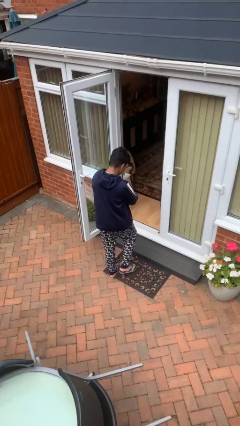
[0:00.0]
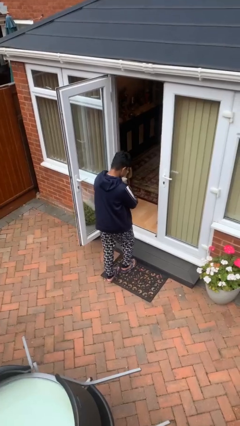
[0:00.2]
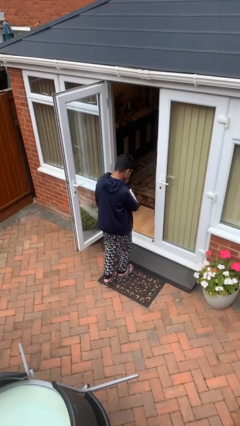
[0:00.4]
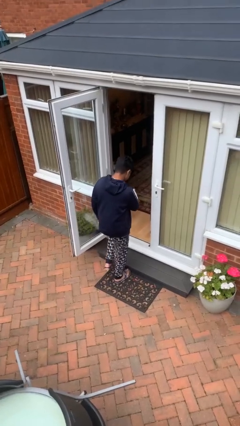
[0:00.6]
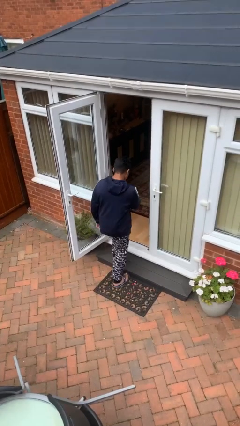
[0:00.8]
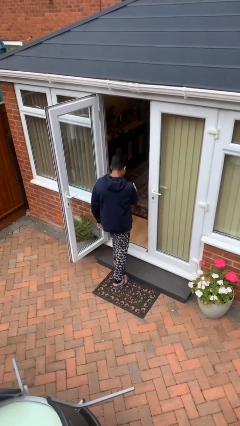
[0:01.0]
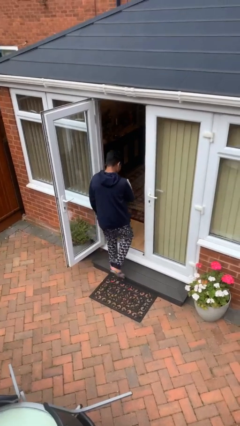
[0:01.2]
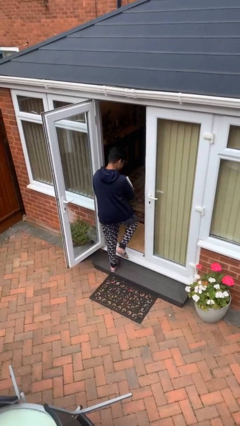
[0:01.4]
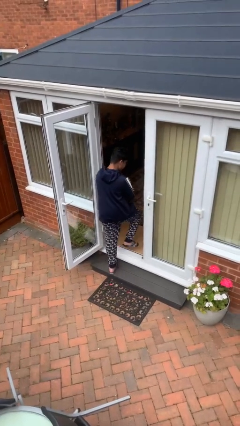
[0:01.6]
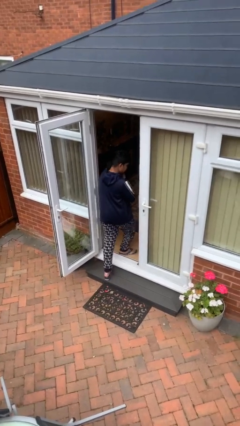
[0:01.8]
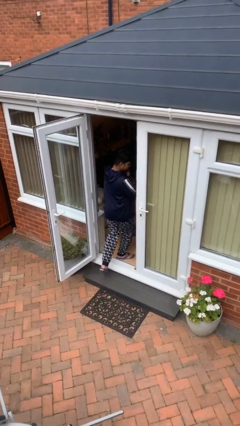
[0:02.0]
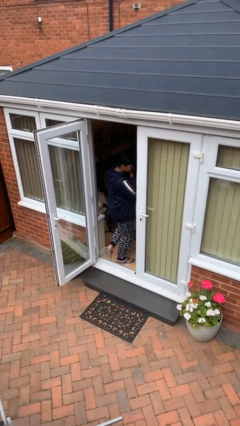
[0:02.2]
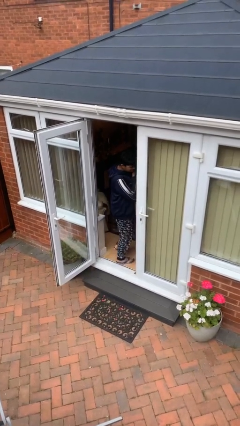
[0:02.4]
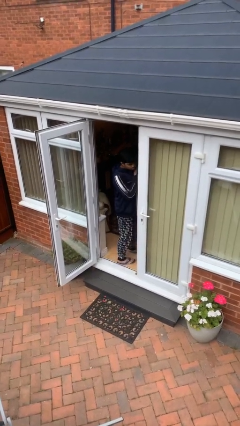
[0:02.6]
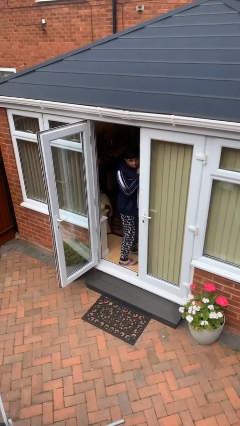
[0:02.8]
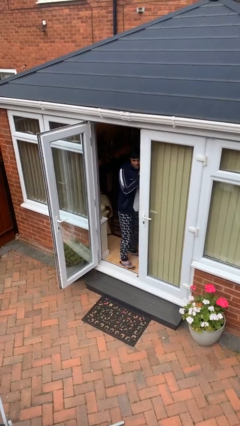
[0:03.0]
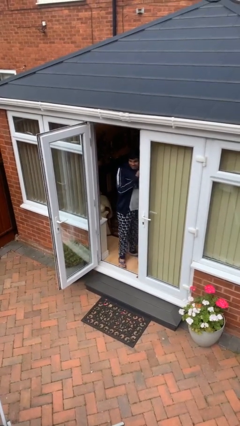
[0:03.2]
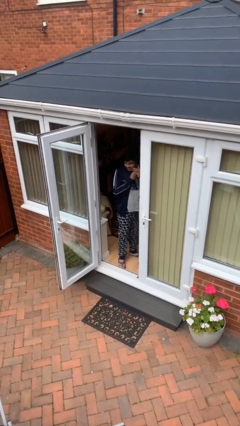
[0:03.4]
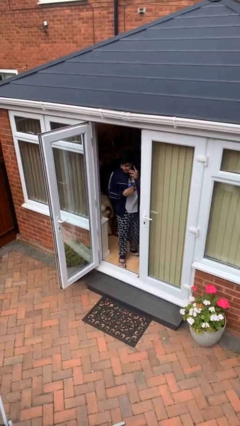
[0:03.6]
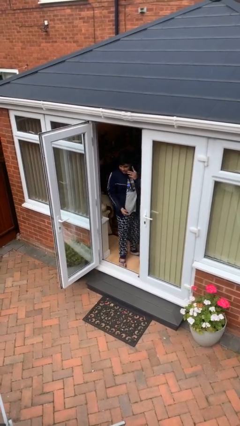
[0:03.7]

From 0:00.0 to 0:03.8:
person exits scene through structure

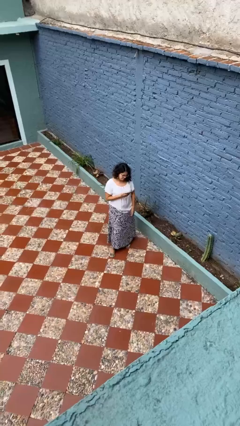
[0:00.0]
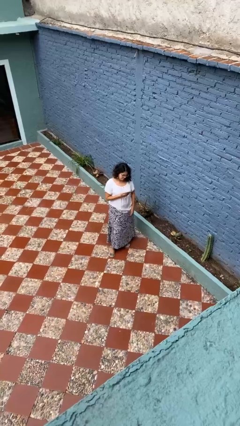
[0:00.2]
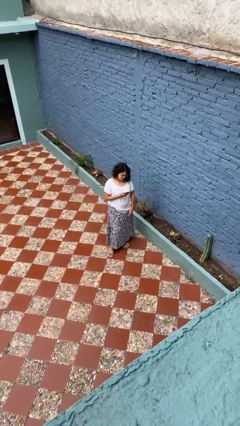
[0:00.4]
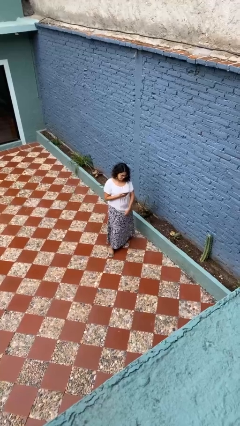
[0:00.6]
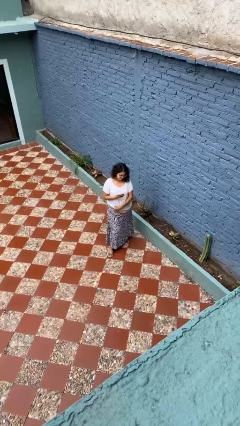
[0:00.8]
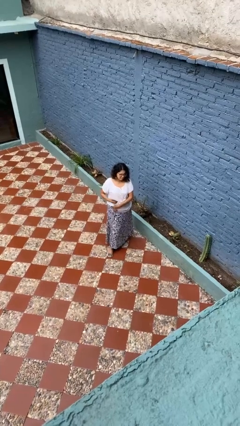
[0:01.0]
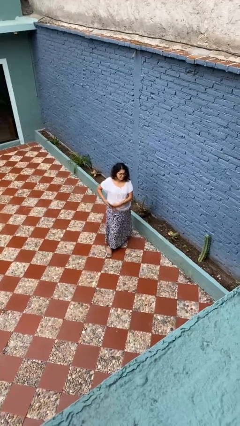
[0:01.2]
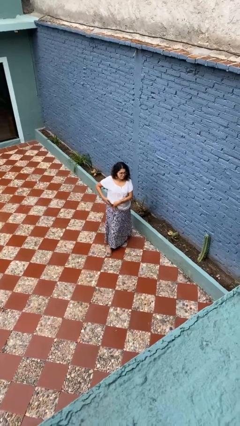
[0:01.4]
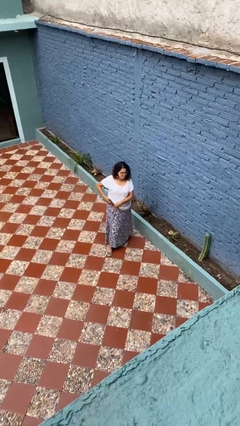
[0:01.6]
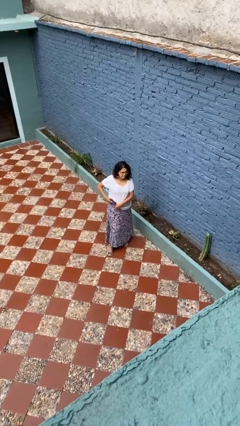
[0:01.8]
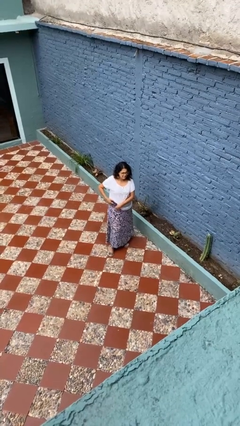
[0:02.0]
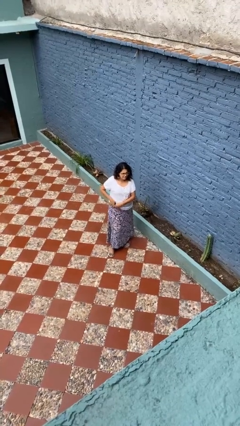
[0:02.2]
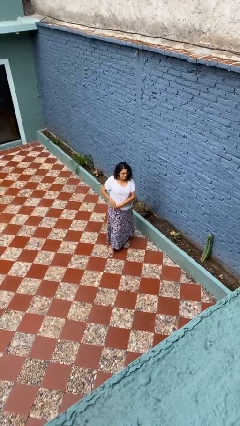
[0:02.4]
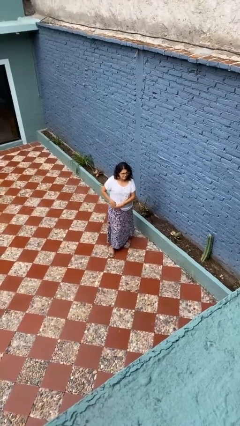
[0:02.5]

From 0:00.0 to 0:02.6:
person puts phone into pocket

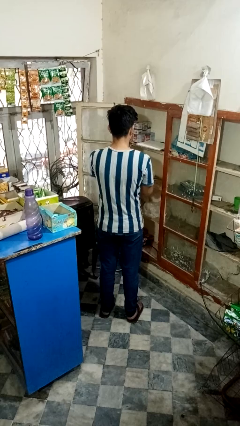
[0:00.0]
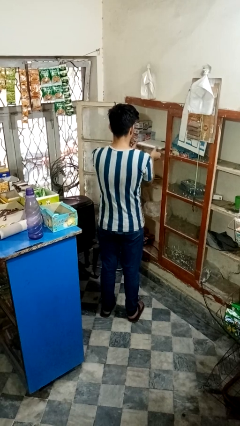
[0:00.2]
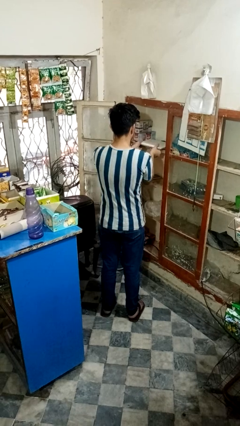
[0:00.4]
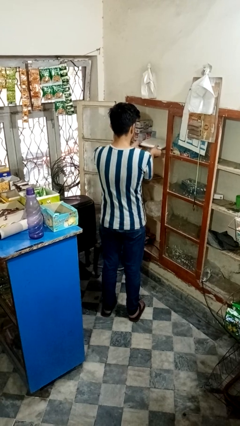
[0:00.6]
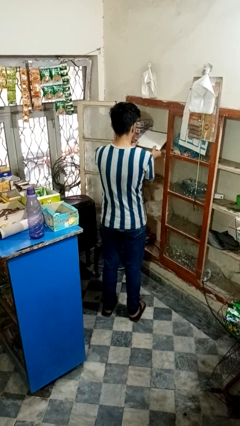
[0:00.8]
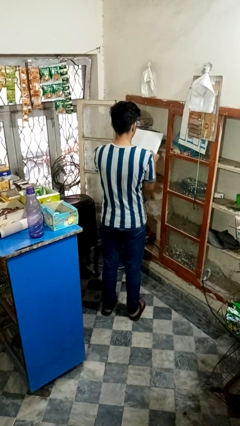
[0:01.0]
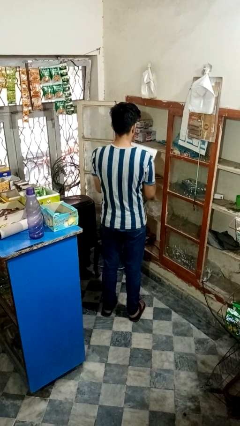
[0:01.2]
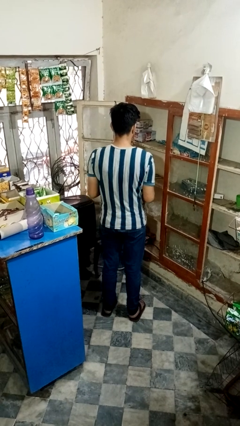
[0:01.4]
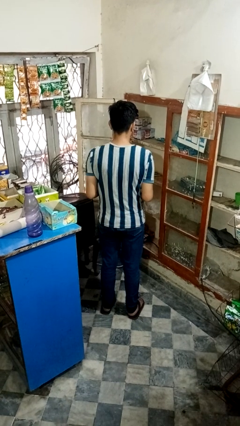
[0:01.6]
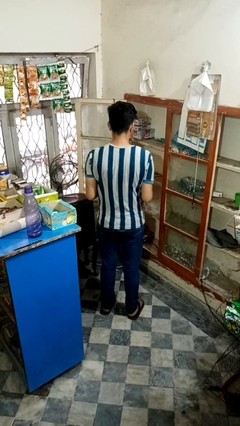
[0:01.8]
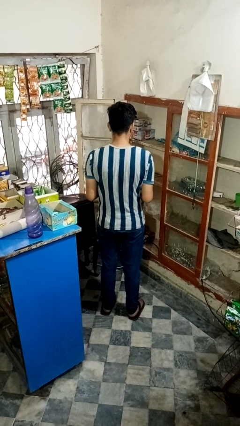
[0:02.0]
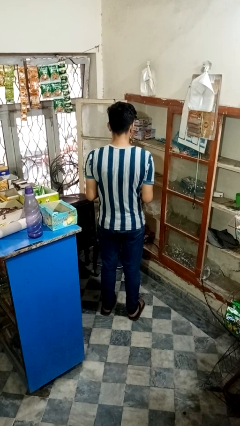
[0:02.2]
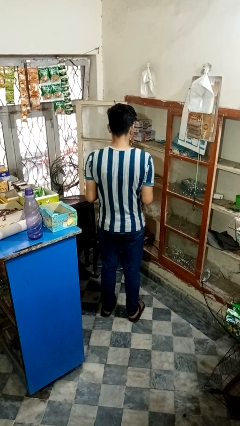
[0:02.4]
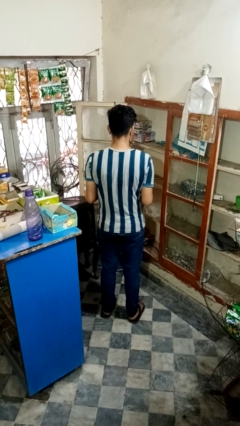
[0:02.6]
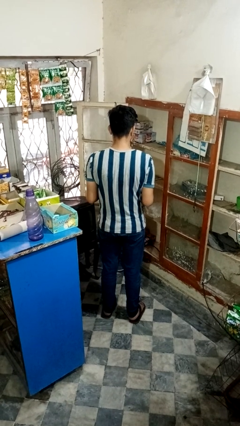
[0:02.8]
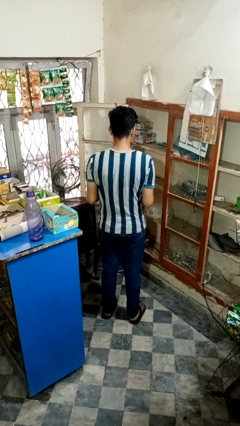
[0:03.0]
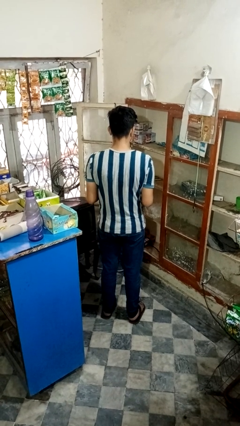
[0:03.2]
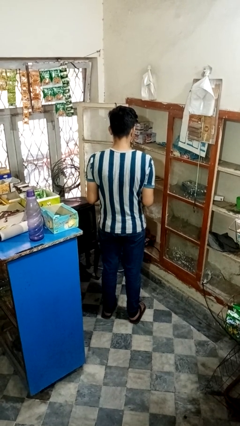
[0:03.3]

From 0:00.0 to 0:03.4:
person picks up object from cabinet

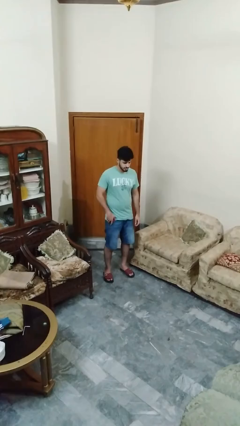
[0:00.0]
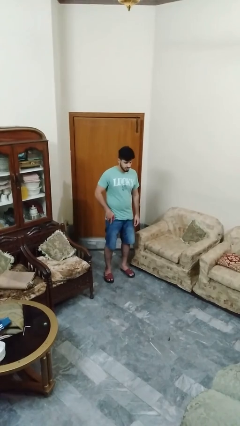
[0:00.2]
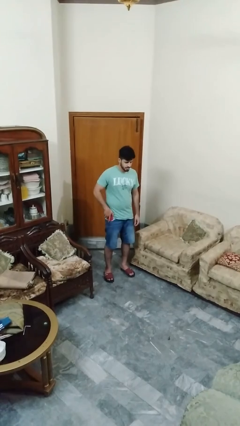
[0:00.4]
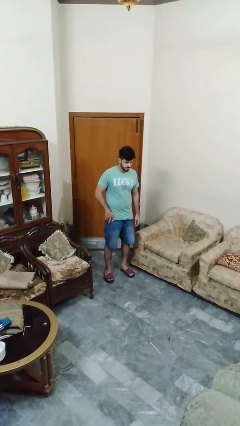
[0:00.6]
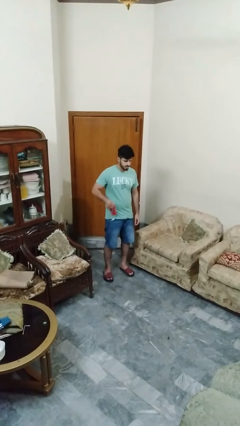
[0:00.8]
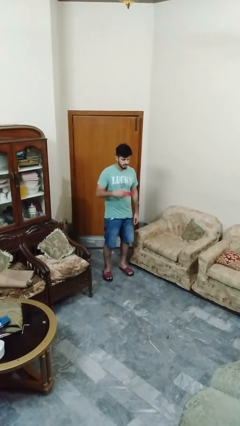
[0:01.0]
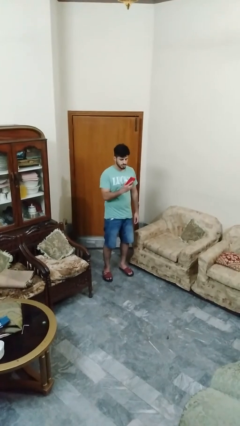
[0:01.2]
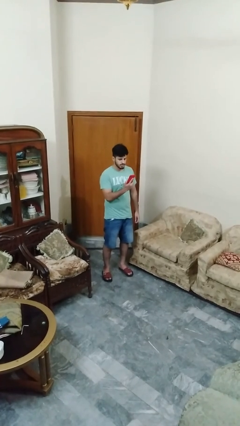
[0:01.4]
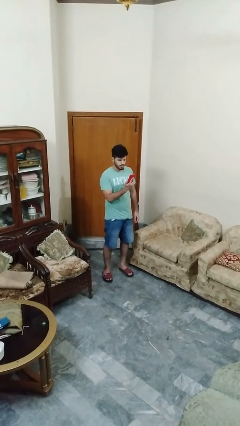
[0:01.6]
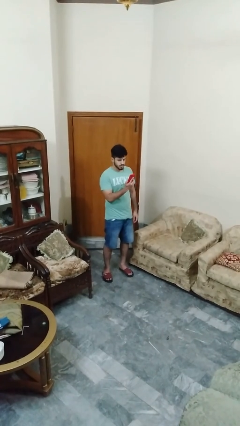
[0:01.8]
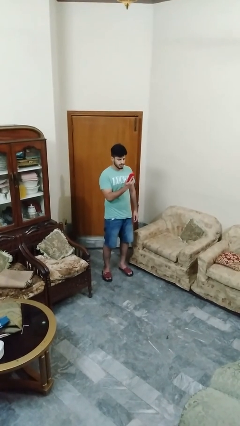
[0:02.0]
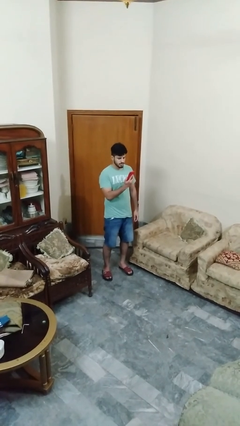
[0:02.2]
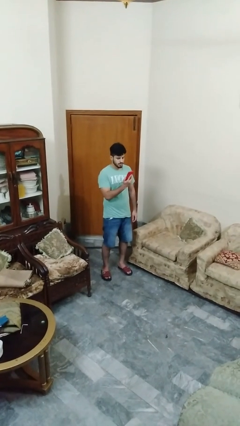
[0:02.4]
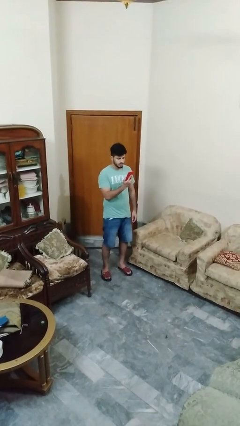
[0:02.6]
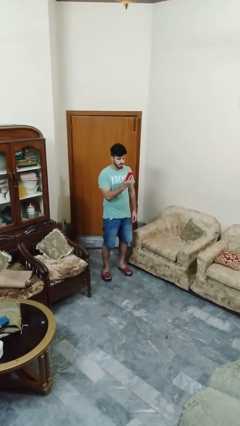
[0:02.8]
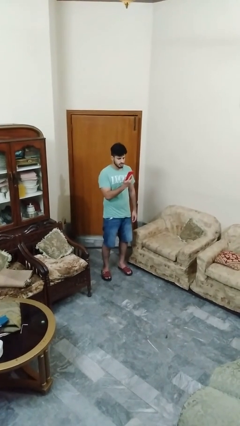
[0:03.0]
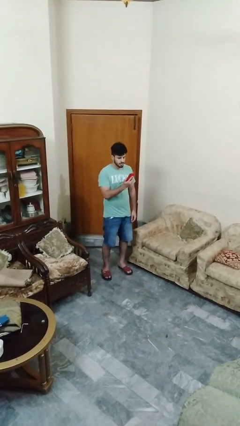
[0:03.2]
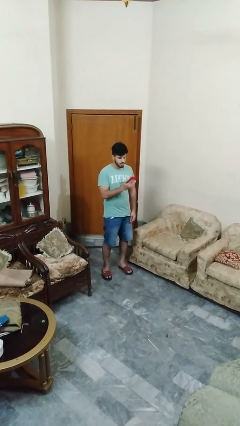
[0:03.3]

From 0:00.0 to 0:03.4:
person takes phone from pocket

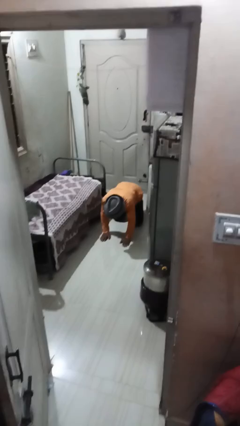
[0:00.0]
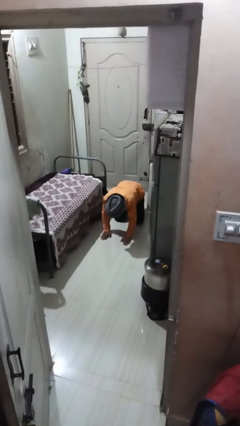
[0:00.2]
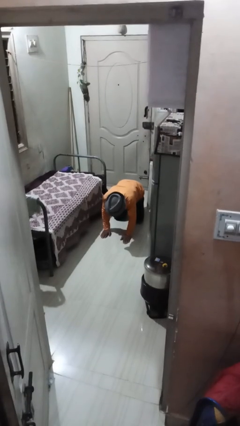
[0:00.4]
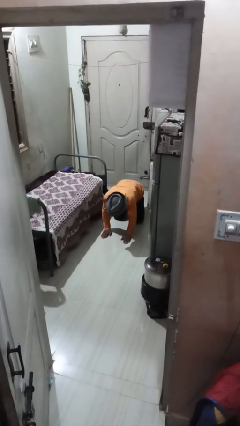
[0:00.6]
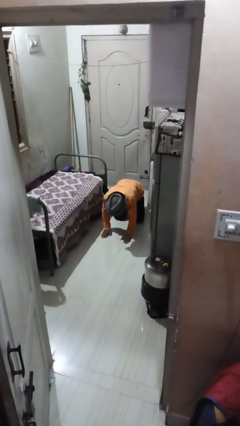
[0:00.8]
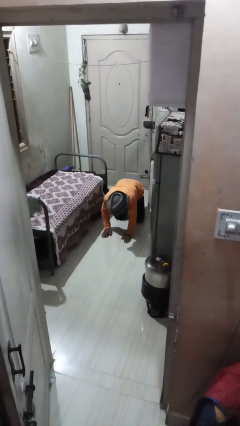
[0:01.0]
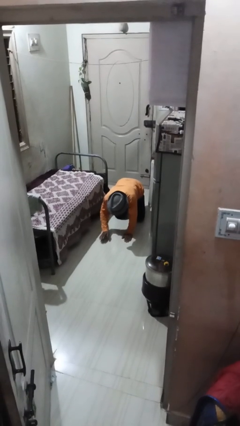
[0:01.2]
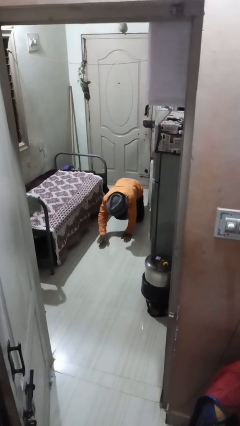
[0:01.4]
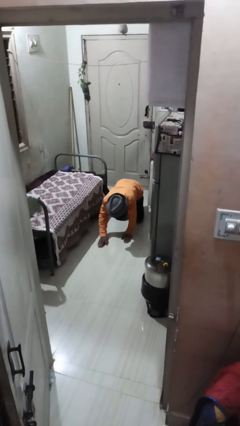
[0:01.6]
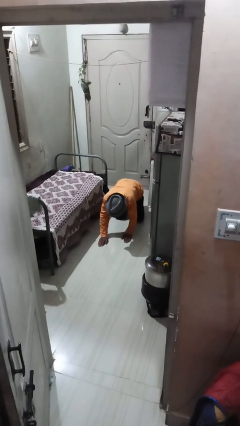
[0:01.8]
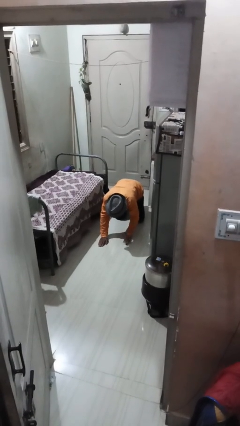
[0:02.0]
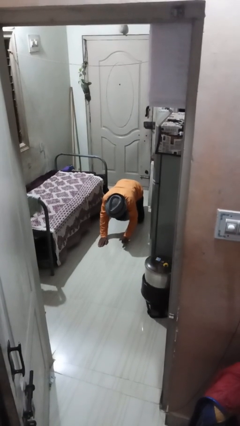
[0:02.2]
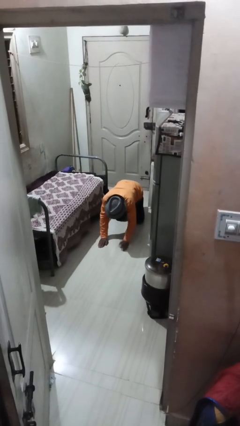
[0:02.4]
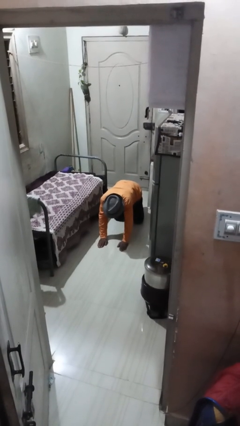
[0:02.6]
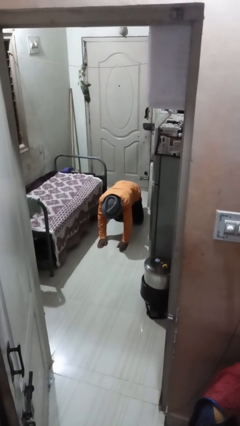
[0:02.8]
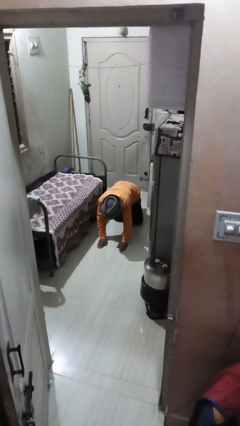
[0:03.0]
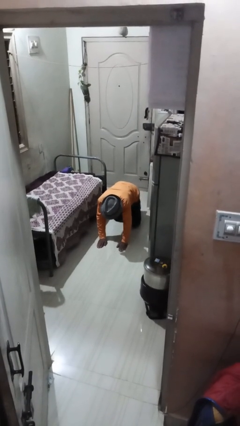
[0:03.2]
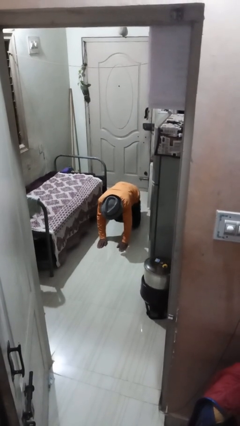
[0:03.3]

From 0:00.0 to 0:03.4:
person crawls

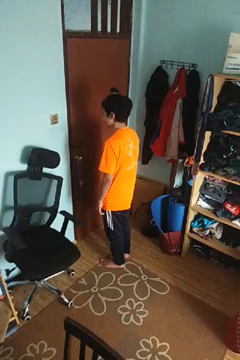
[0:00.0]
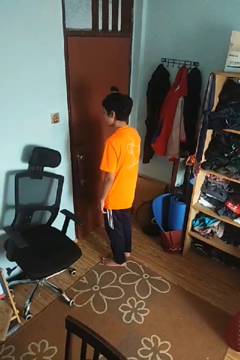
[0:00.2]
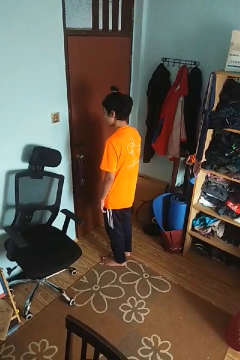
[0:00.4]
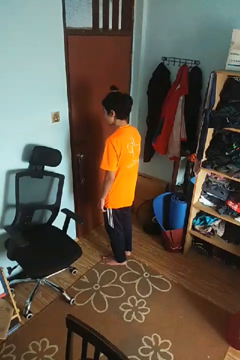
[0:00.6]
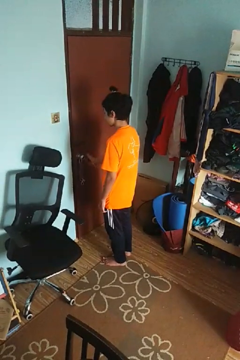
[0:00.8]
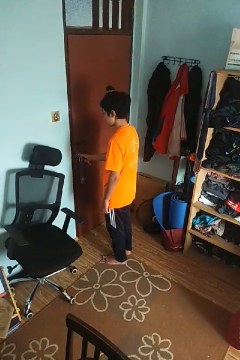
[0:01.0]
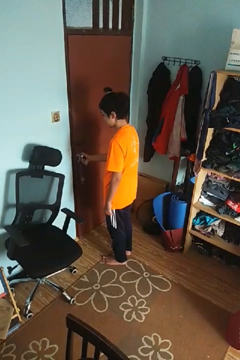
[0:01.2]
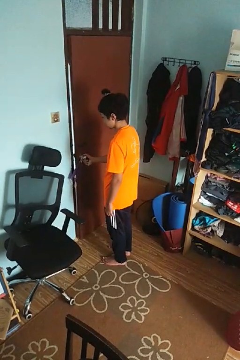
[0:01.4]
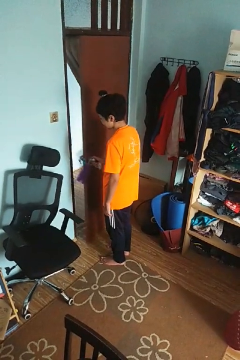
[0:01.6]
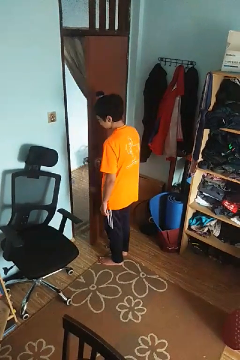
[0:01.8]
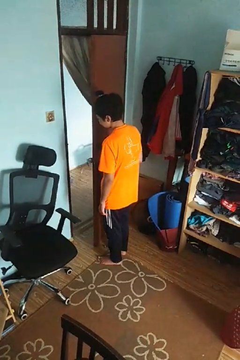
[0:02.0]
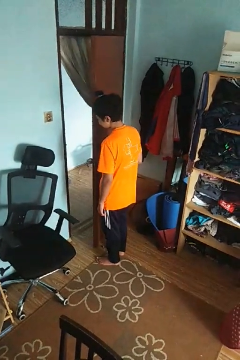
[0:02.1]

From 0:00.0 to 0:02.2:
person opens facility door
